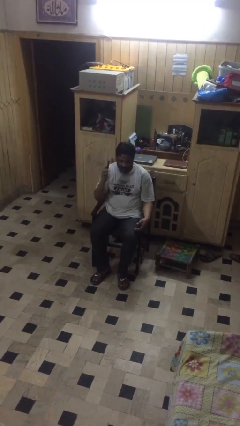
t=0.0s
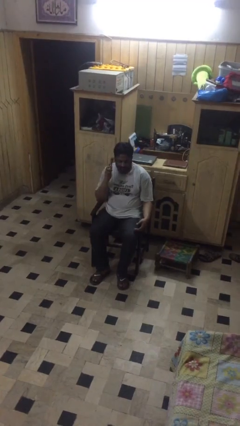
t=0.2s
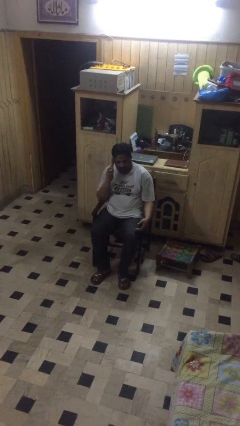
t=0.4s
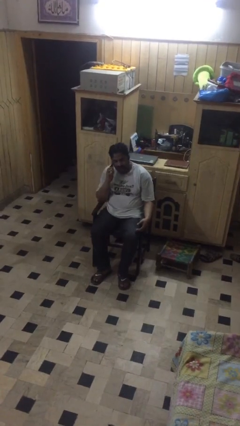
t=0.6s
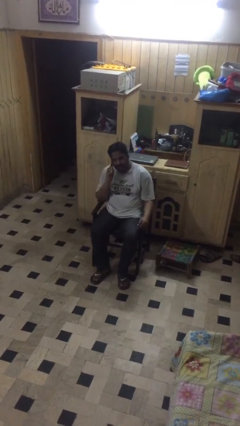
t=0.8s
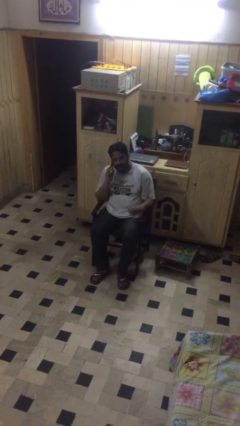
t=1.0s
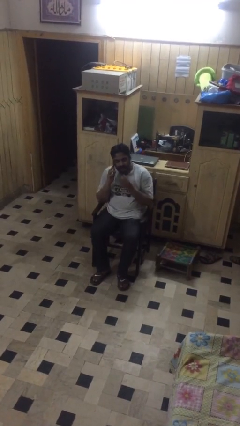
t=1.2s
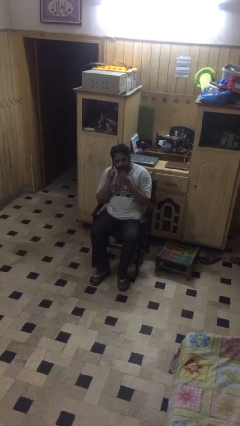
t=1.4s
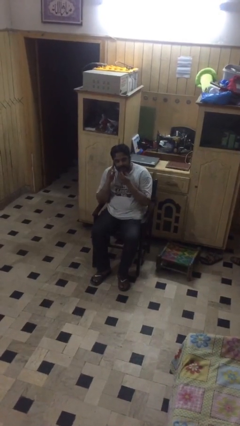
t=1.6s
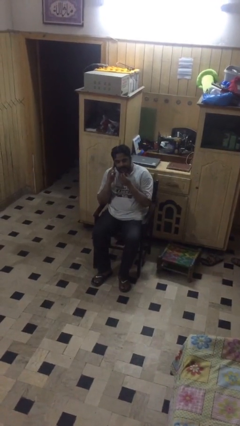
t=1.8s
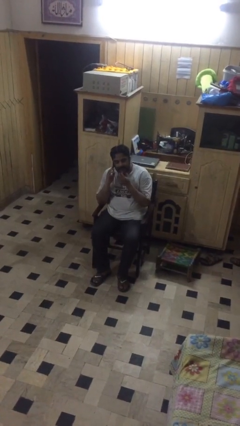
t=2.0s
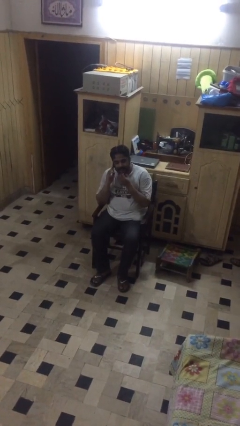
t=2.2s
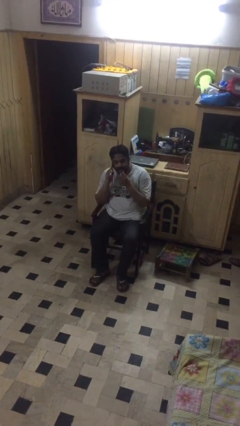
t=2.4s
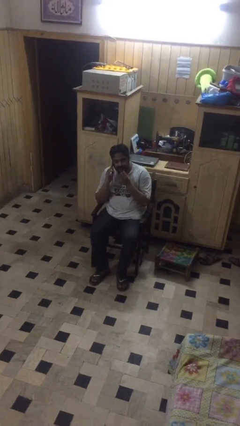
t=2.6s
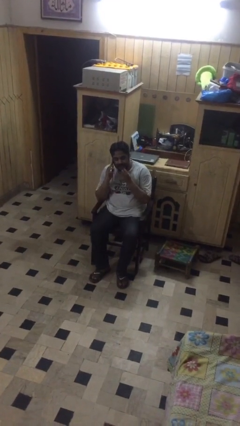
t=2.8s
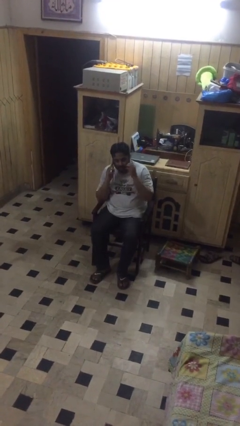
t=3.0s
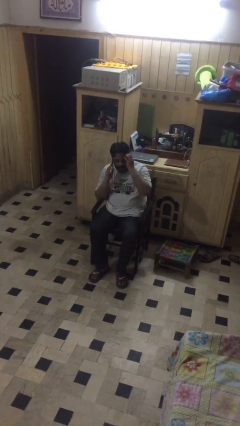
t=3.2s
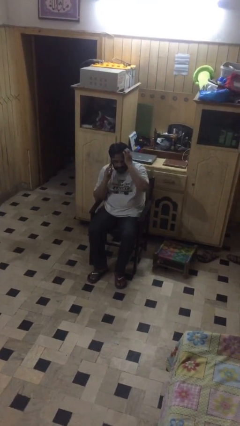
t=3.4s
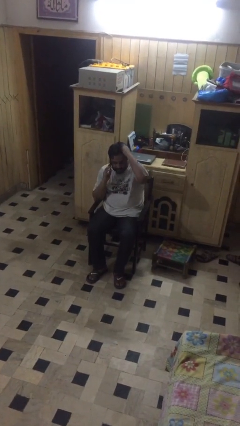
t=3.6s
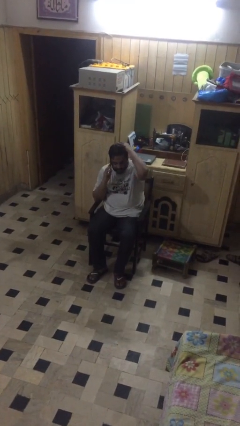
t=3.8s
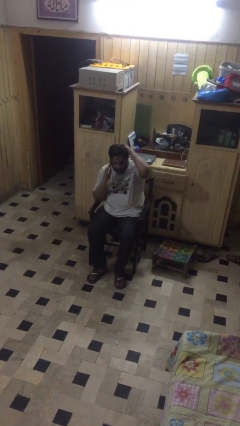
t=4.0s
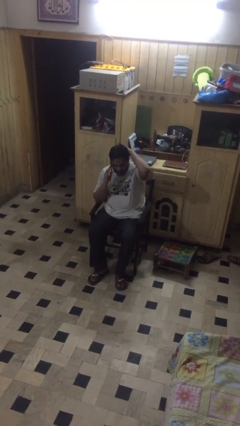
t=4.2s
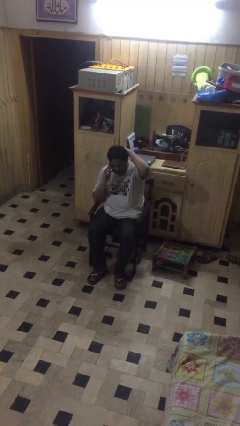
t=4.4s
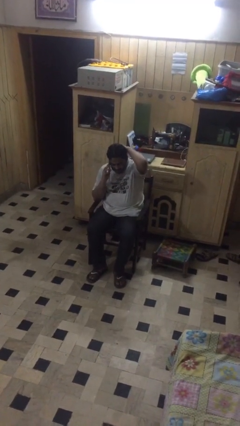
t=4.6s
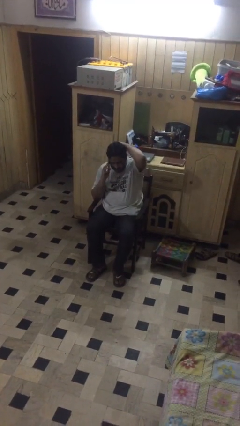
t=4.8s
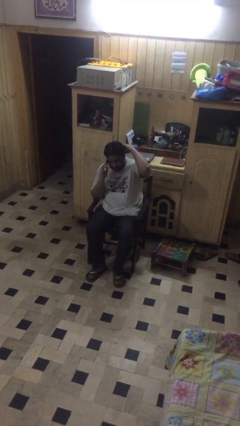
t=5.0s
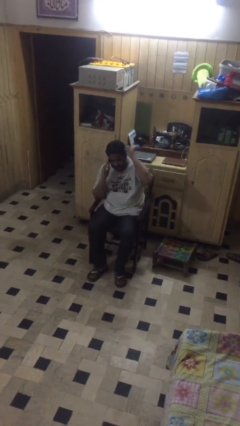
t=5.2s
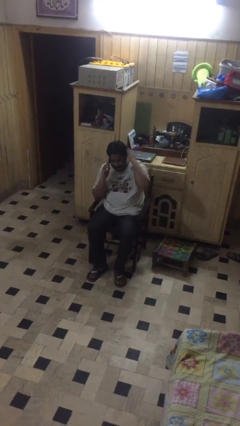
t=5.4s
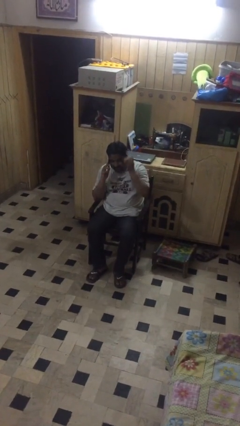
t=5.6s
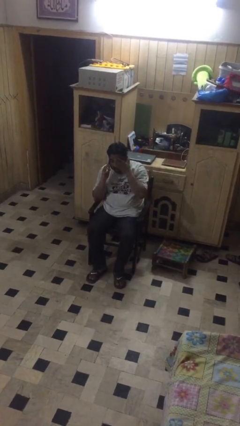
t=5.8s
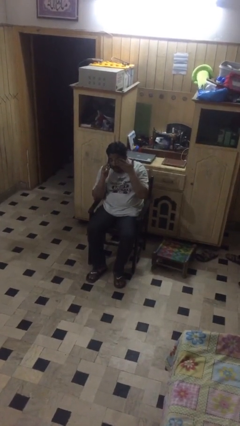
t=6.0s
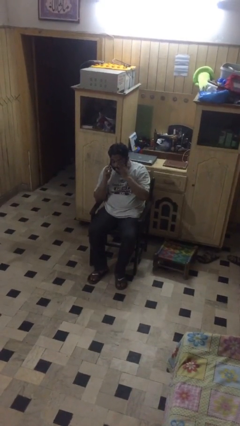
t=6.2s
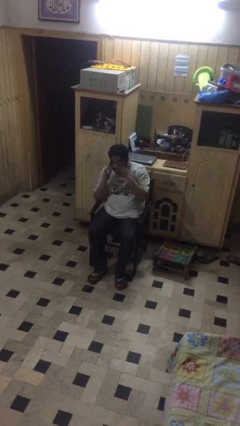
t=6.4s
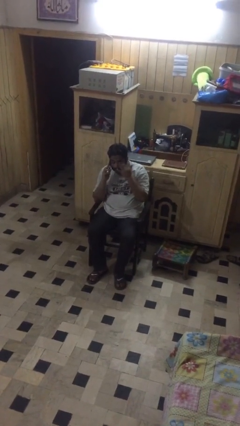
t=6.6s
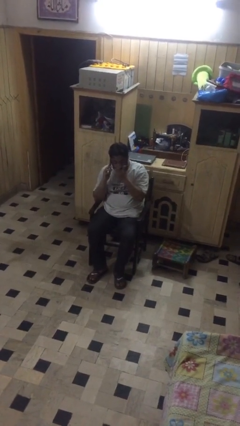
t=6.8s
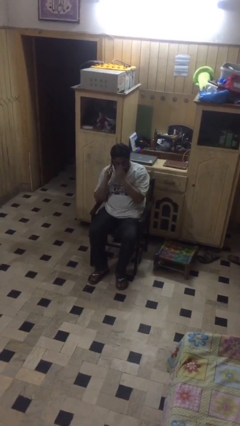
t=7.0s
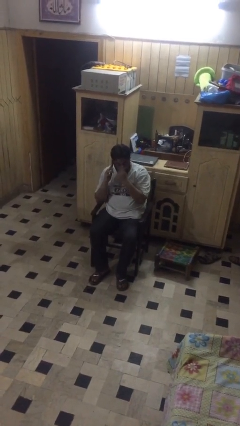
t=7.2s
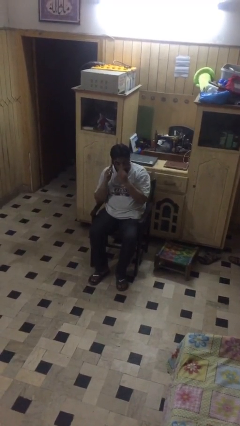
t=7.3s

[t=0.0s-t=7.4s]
person talks on phone

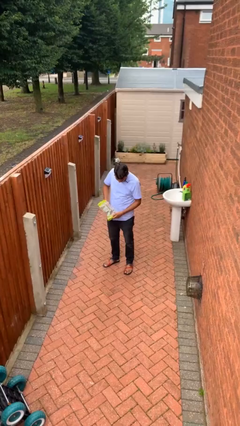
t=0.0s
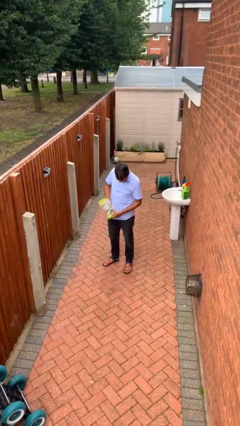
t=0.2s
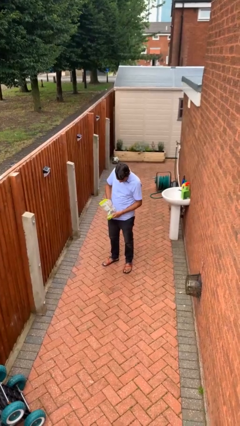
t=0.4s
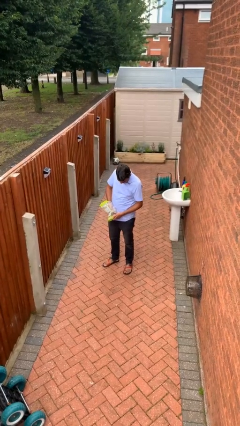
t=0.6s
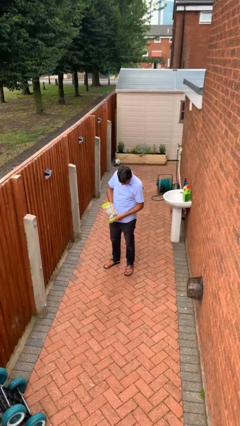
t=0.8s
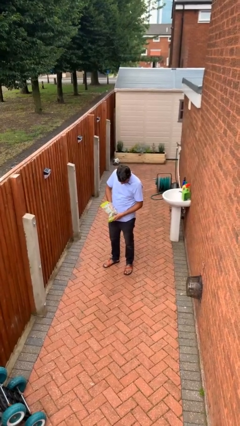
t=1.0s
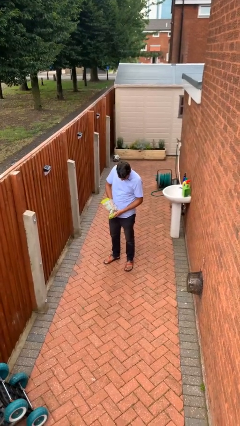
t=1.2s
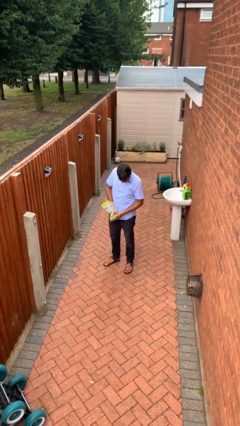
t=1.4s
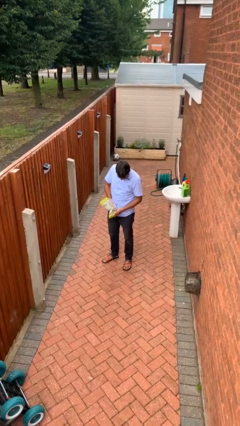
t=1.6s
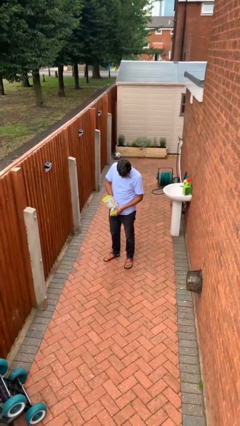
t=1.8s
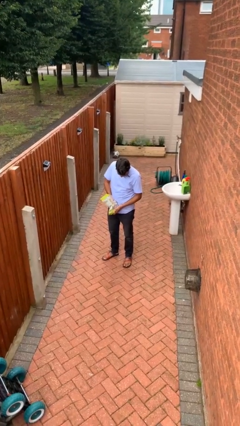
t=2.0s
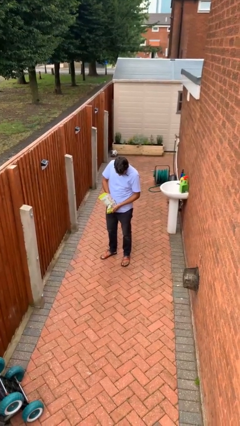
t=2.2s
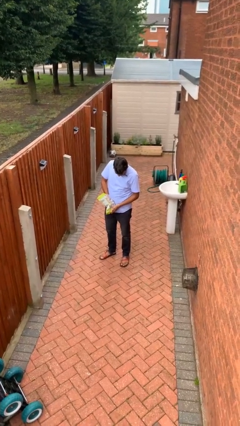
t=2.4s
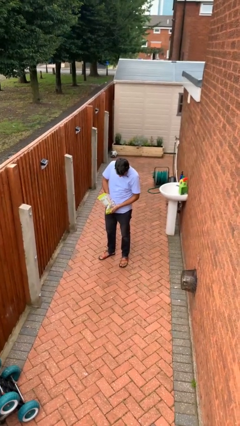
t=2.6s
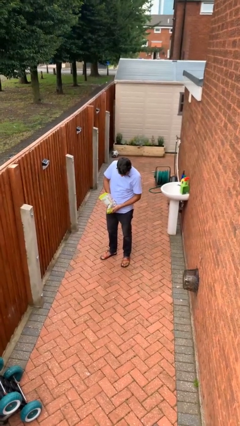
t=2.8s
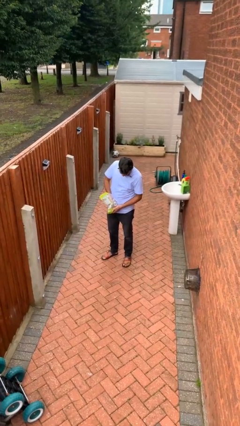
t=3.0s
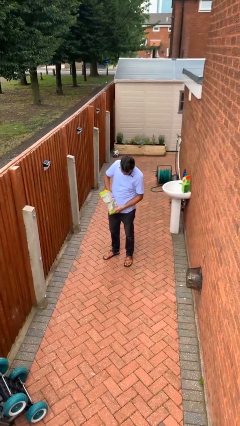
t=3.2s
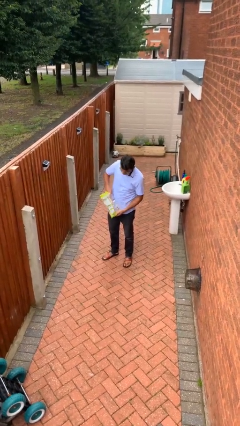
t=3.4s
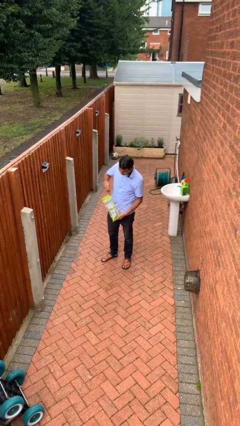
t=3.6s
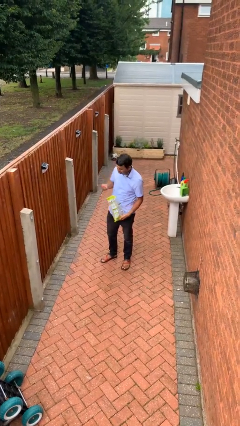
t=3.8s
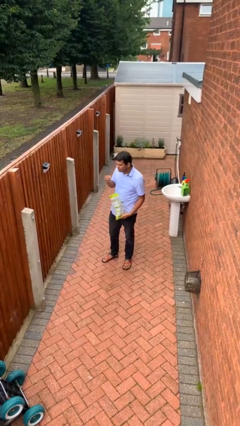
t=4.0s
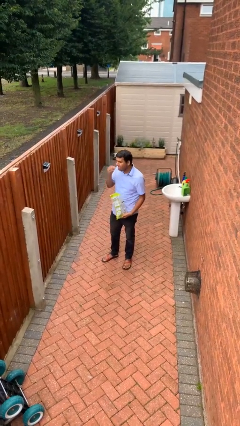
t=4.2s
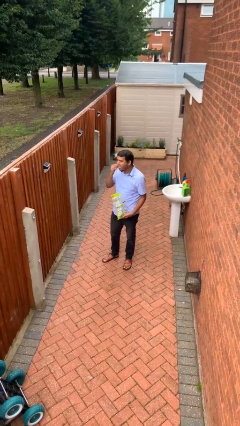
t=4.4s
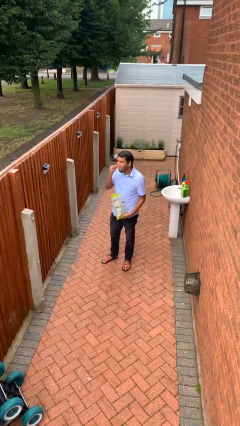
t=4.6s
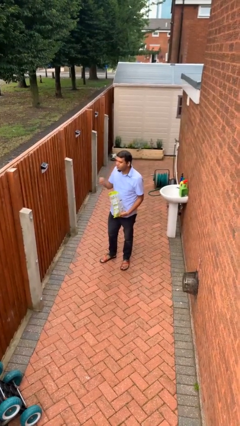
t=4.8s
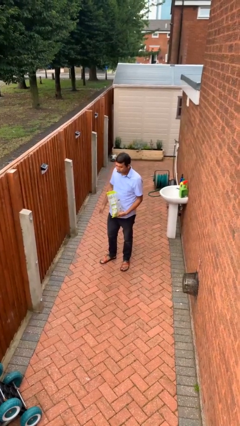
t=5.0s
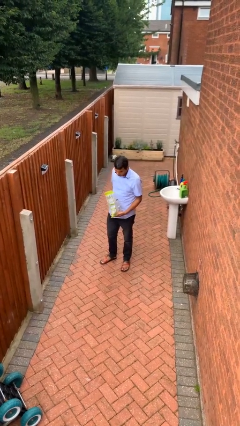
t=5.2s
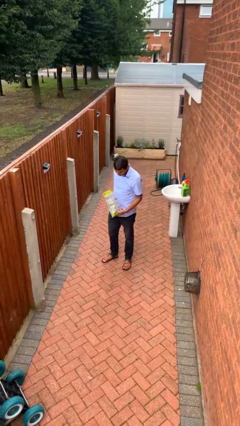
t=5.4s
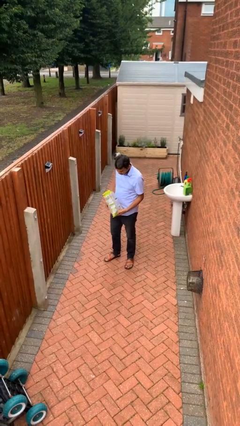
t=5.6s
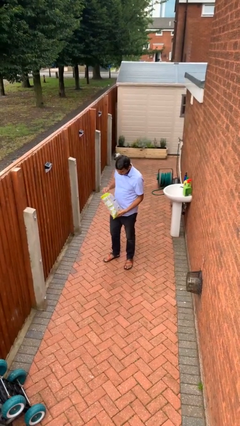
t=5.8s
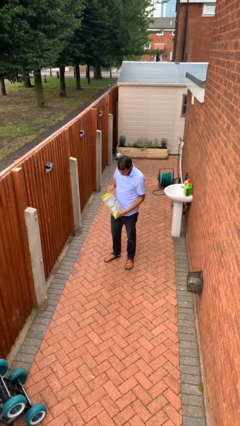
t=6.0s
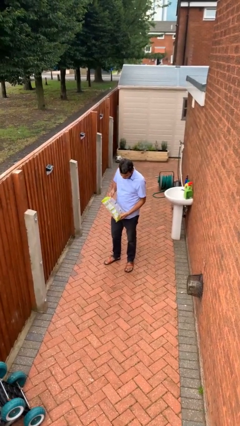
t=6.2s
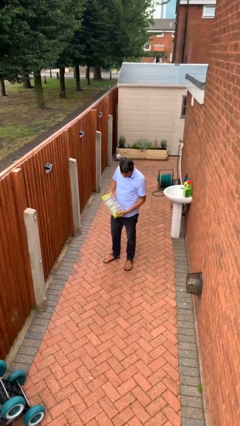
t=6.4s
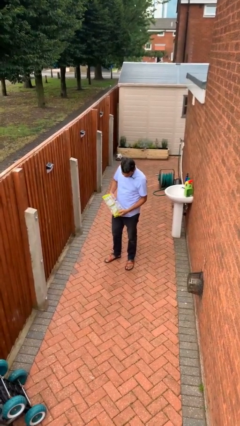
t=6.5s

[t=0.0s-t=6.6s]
person eats snack from bag

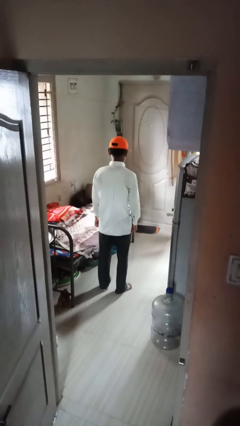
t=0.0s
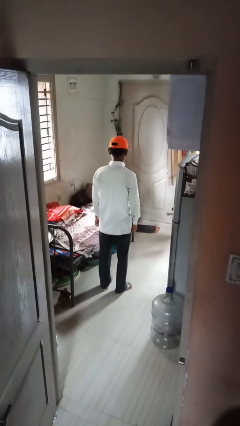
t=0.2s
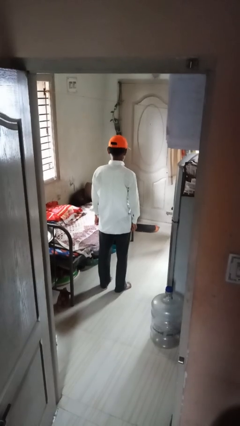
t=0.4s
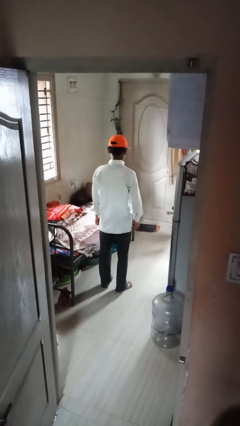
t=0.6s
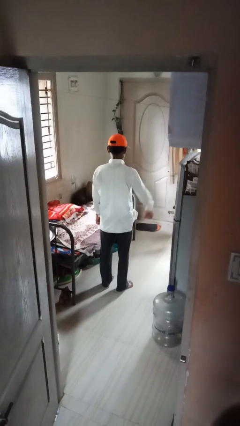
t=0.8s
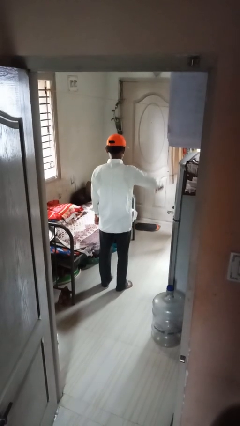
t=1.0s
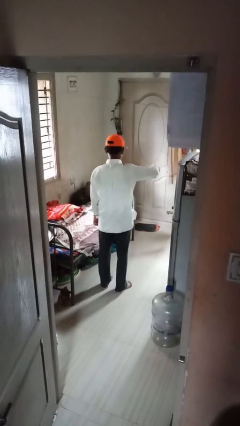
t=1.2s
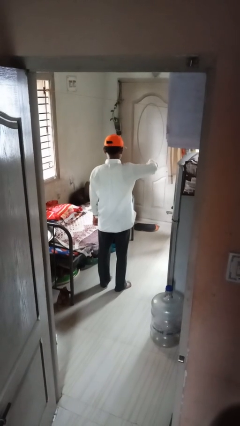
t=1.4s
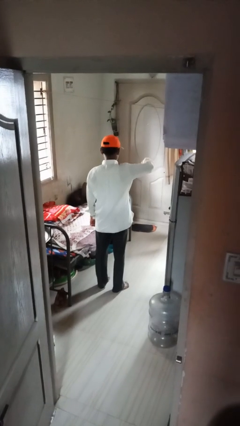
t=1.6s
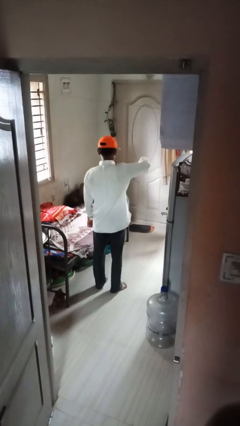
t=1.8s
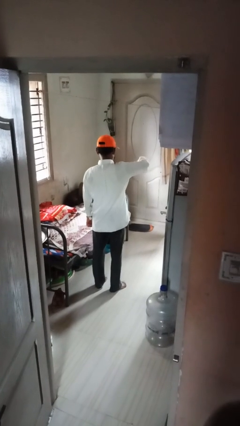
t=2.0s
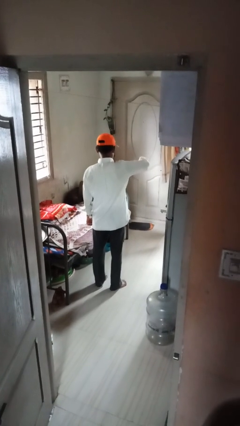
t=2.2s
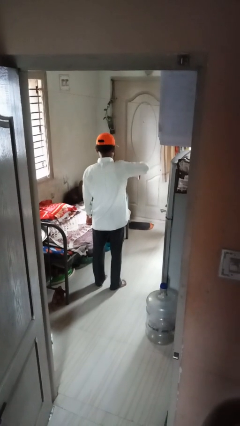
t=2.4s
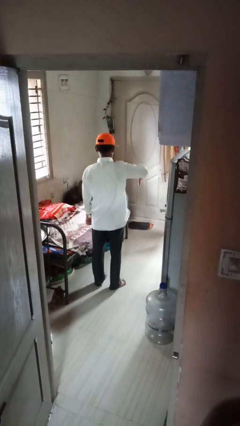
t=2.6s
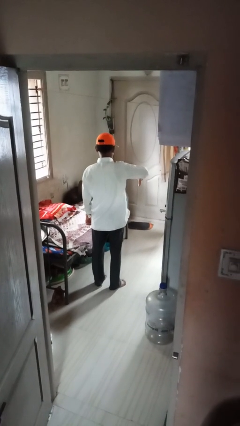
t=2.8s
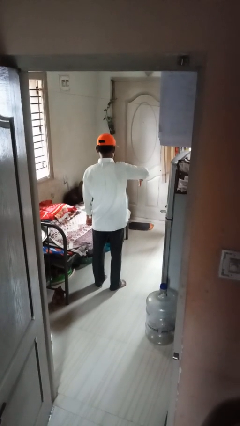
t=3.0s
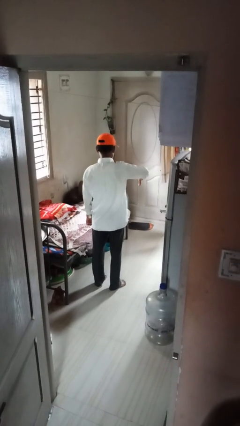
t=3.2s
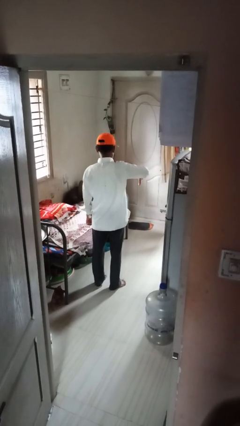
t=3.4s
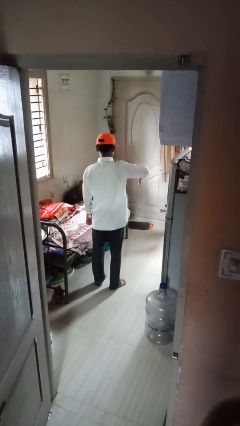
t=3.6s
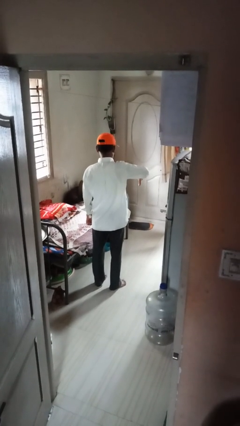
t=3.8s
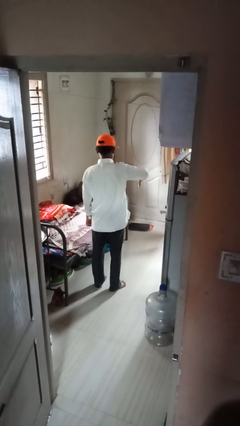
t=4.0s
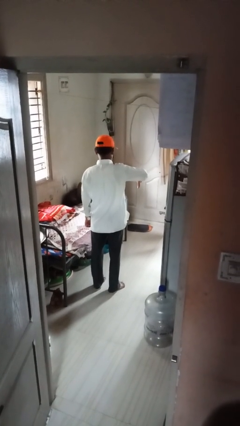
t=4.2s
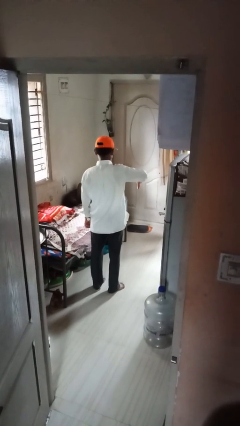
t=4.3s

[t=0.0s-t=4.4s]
person gestures thumbs down
